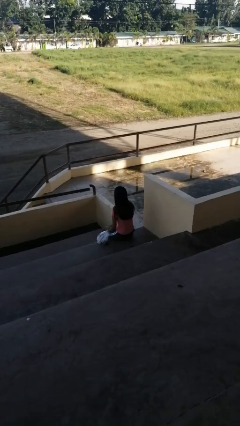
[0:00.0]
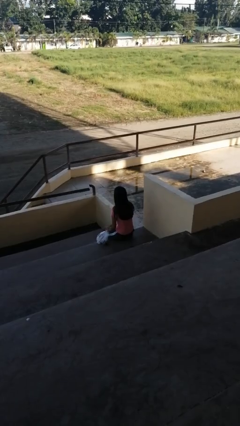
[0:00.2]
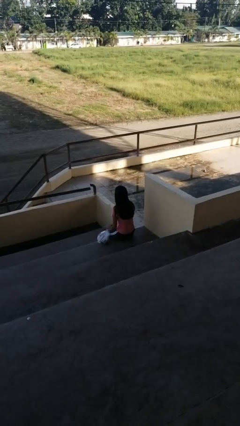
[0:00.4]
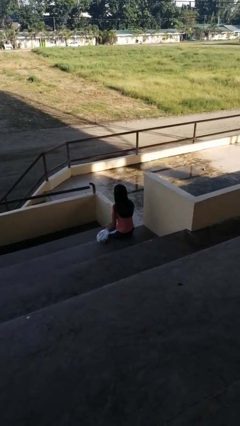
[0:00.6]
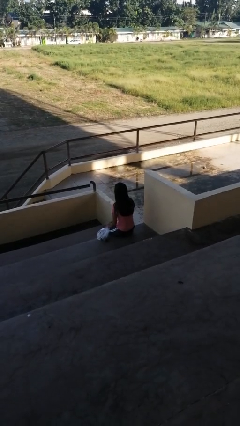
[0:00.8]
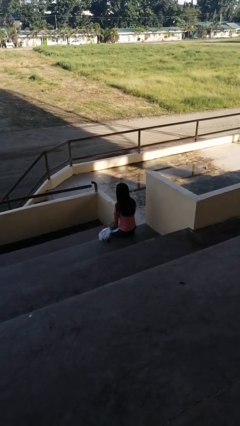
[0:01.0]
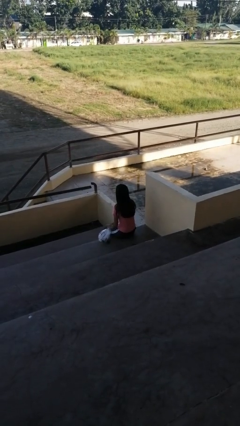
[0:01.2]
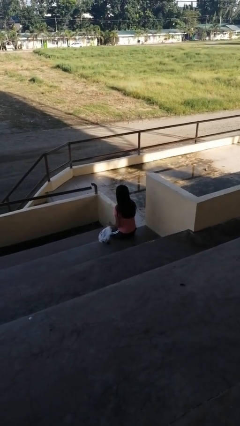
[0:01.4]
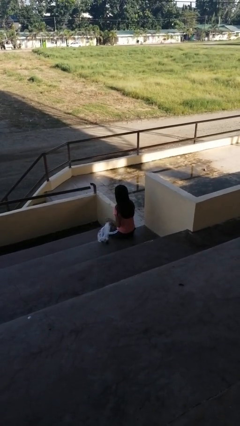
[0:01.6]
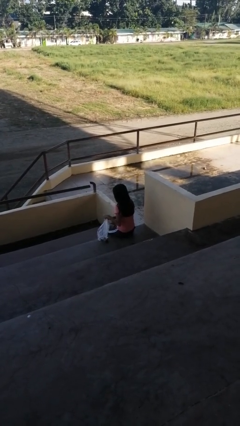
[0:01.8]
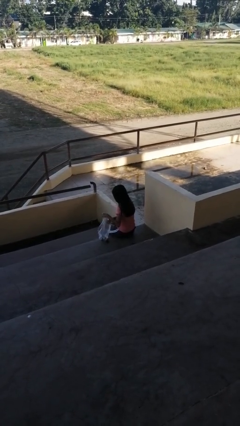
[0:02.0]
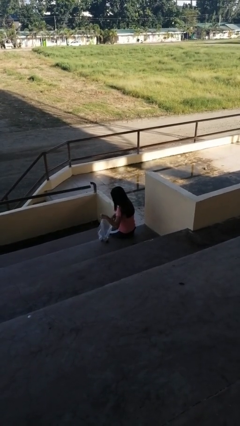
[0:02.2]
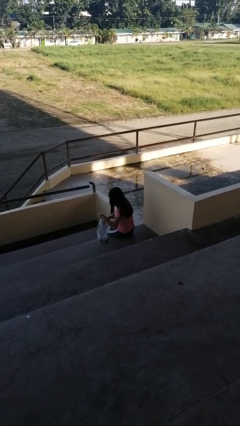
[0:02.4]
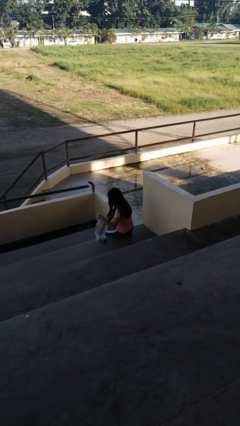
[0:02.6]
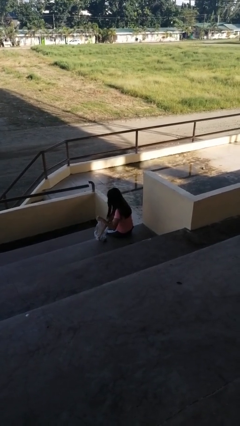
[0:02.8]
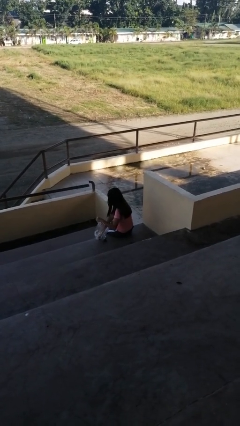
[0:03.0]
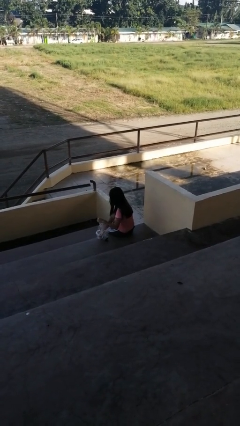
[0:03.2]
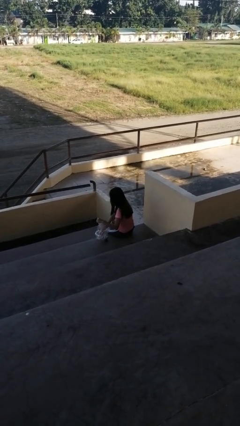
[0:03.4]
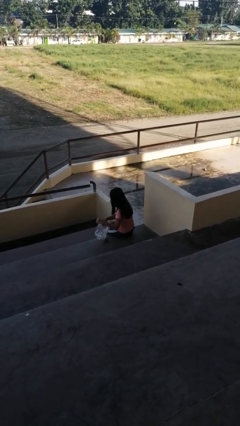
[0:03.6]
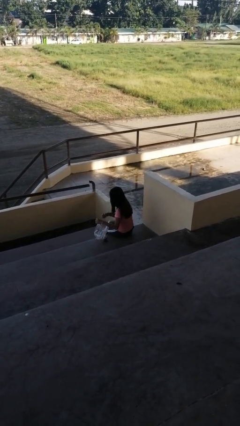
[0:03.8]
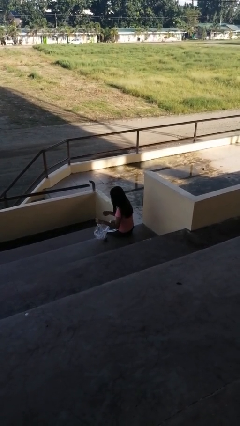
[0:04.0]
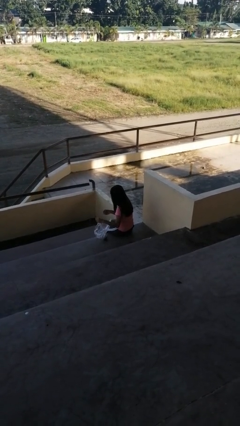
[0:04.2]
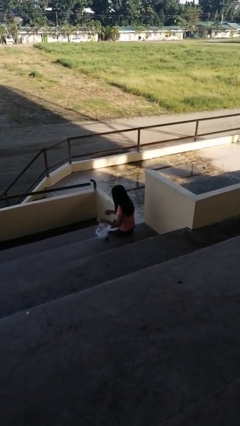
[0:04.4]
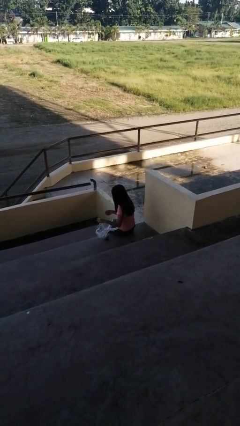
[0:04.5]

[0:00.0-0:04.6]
person takes object from bag

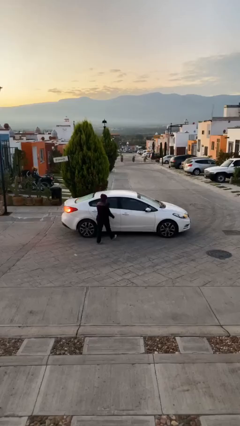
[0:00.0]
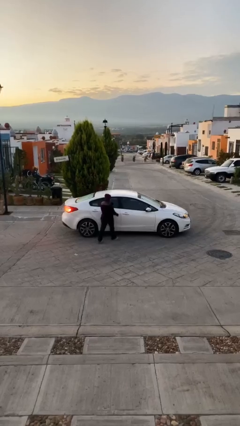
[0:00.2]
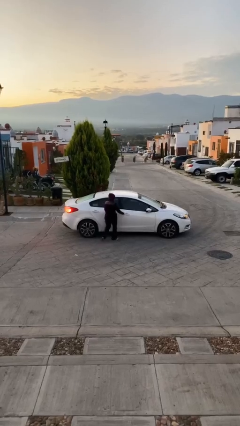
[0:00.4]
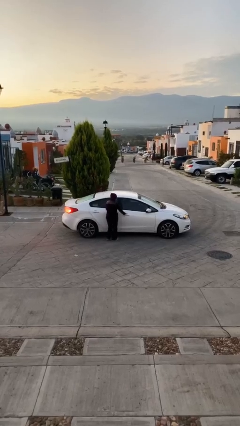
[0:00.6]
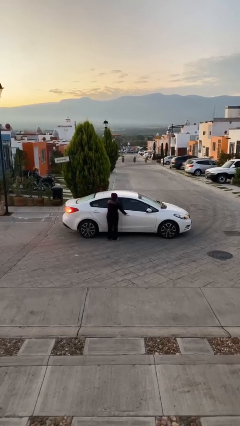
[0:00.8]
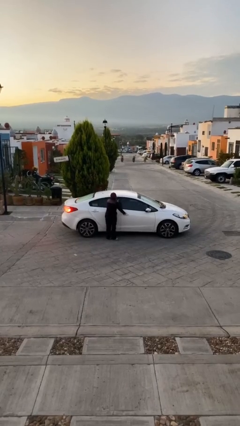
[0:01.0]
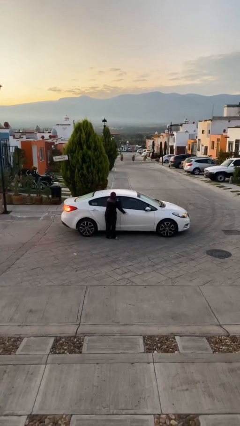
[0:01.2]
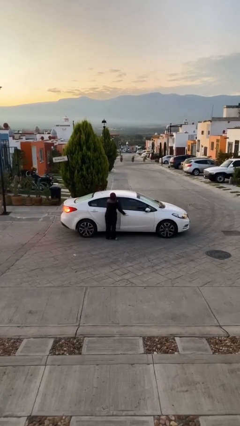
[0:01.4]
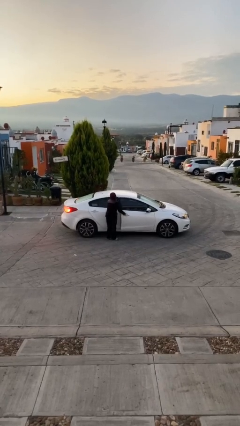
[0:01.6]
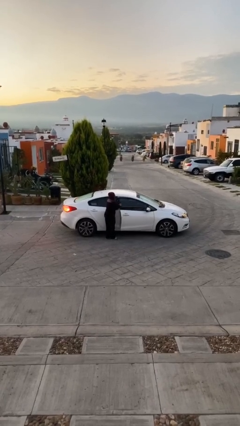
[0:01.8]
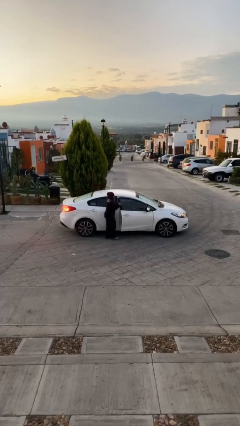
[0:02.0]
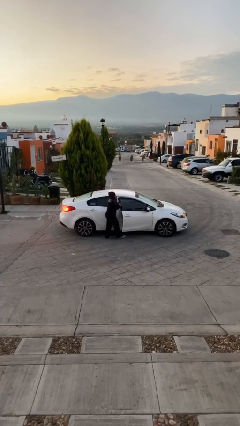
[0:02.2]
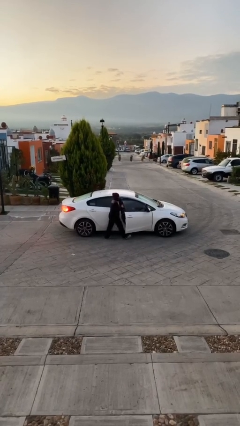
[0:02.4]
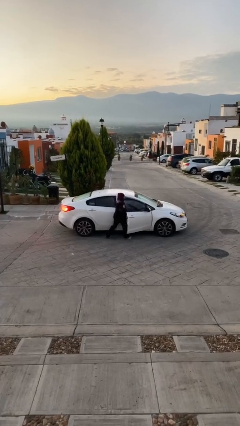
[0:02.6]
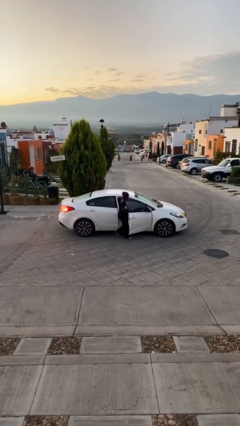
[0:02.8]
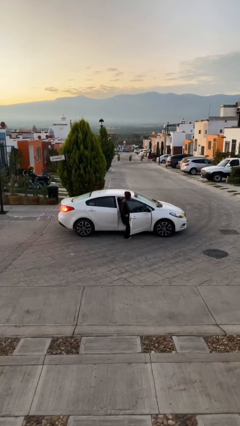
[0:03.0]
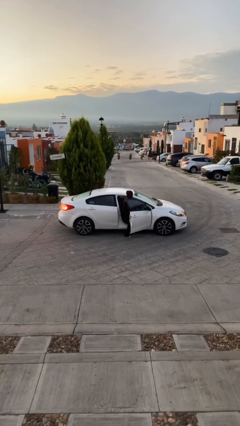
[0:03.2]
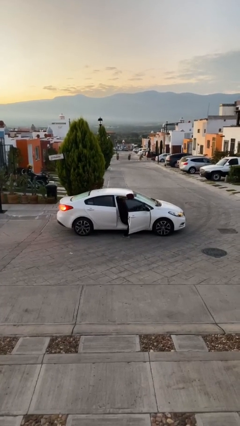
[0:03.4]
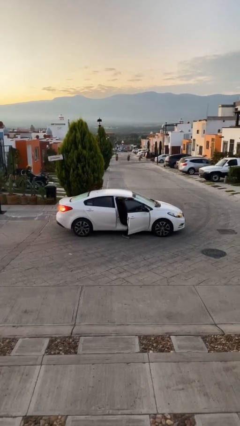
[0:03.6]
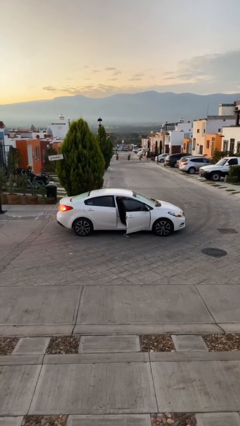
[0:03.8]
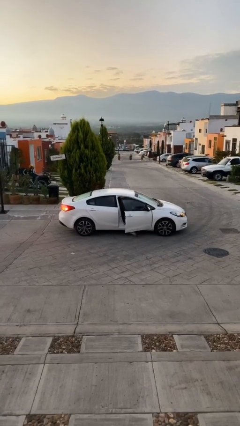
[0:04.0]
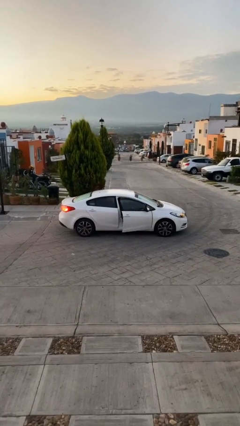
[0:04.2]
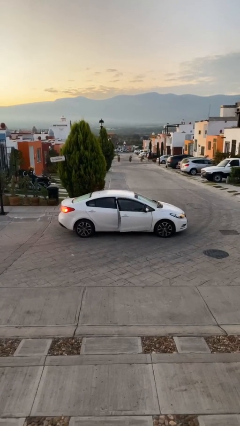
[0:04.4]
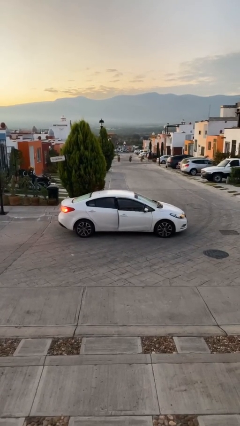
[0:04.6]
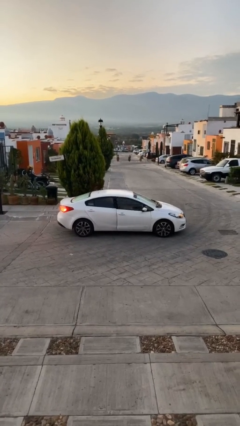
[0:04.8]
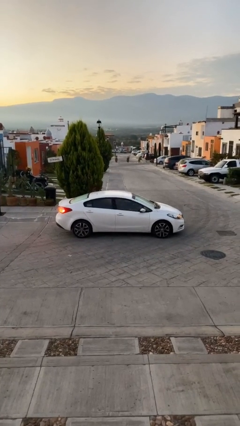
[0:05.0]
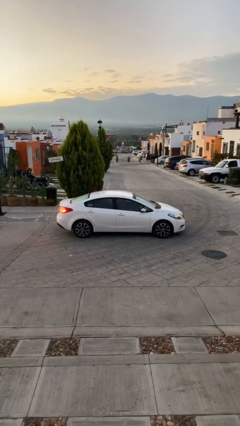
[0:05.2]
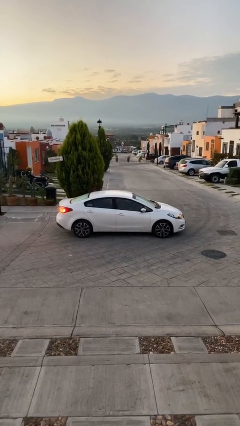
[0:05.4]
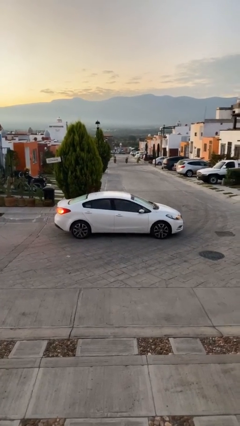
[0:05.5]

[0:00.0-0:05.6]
car picks up person

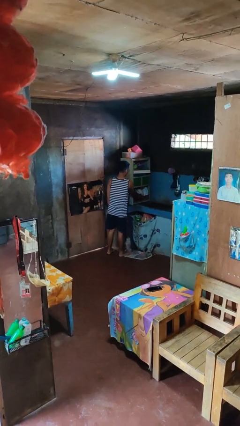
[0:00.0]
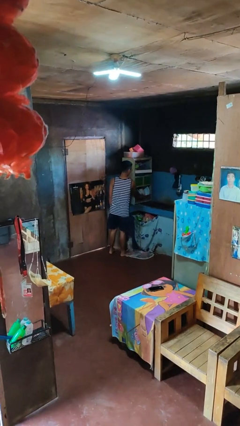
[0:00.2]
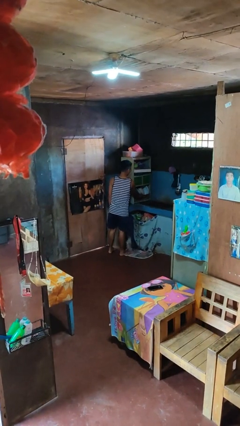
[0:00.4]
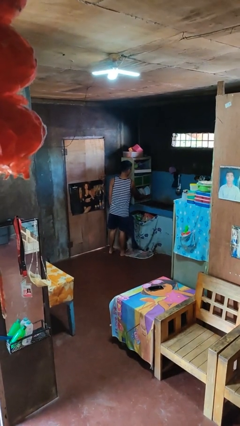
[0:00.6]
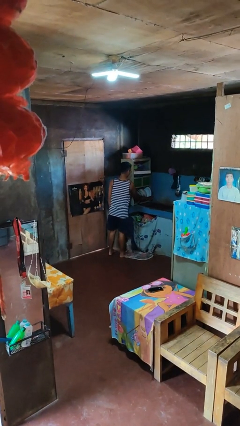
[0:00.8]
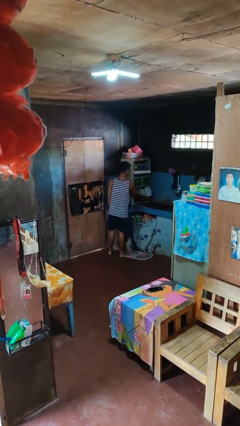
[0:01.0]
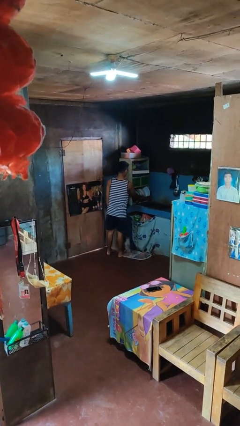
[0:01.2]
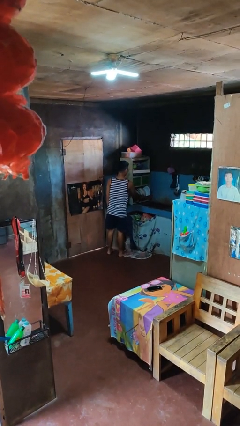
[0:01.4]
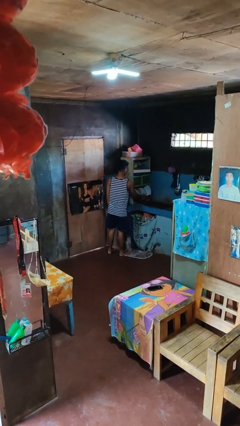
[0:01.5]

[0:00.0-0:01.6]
person opens dishwasher

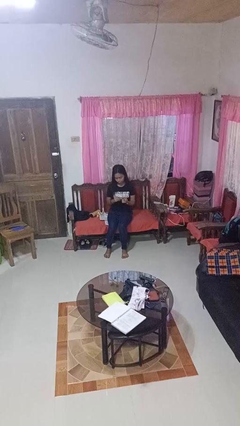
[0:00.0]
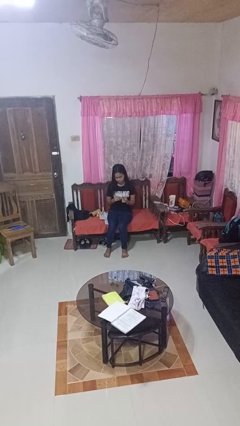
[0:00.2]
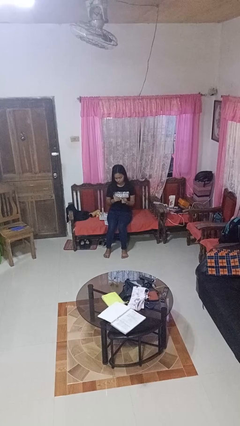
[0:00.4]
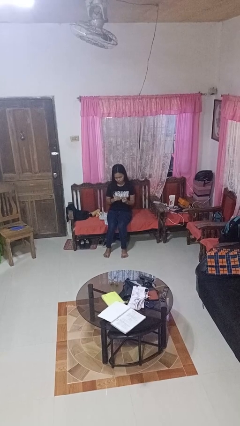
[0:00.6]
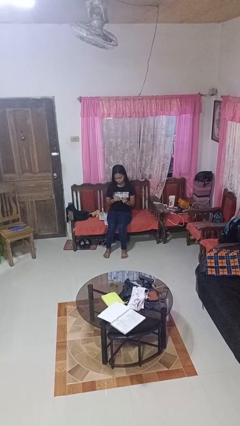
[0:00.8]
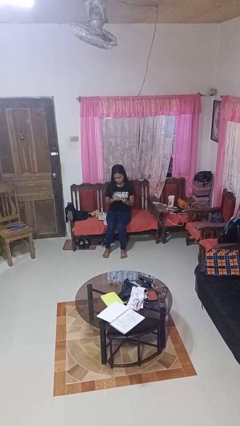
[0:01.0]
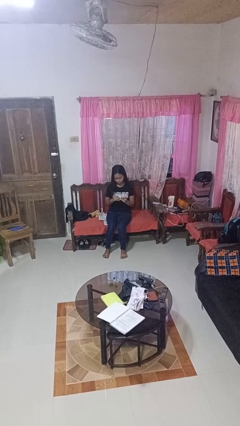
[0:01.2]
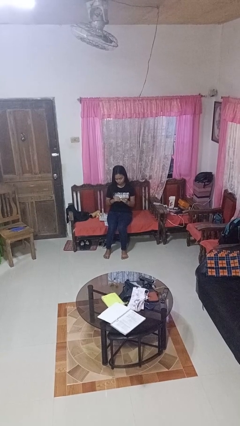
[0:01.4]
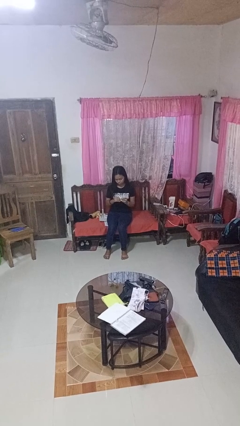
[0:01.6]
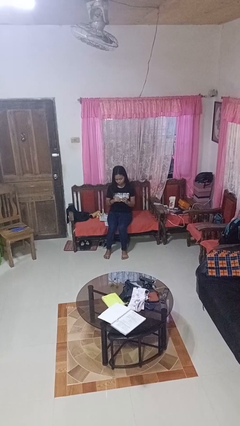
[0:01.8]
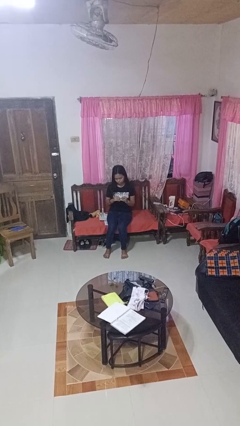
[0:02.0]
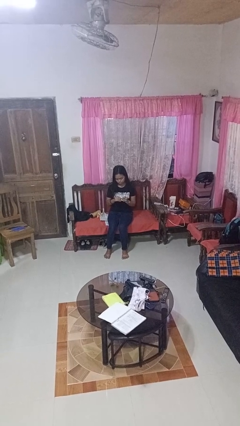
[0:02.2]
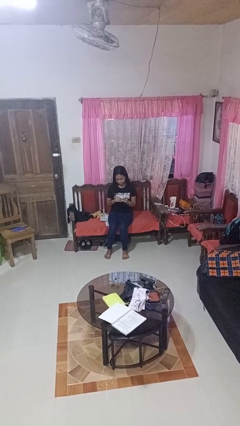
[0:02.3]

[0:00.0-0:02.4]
person clips fingernails

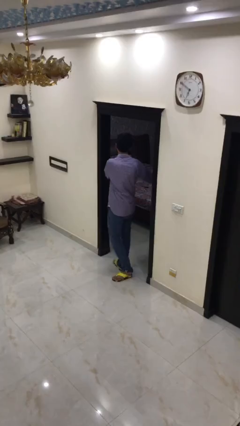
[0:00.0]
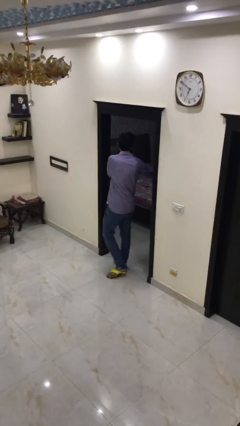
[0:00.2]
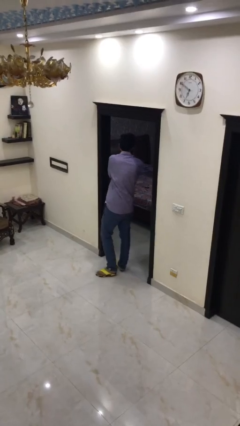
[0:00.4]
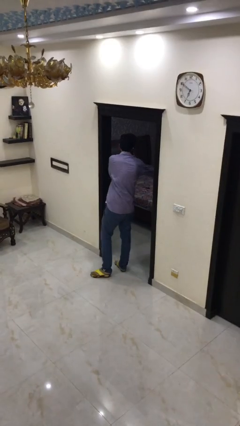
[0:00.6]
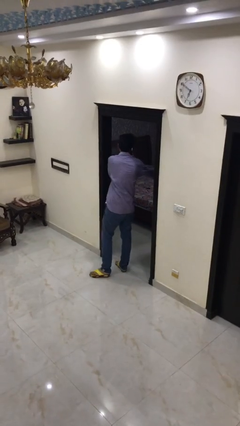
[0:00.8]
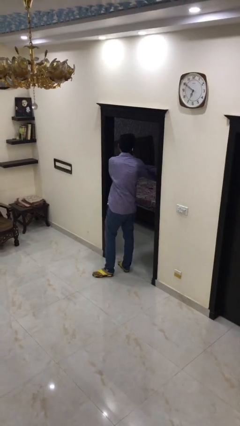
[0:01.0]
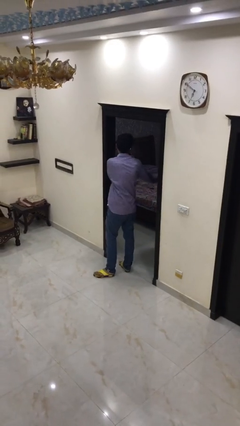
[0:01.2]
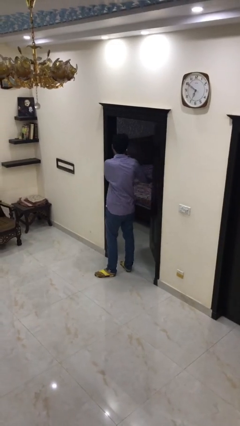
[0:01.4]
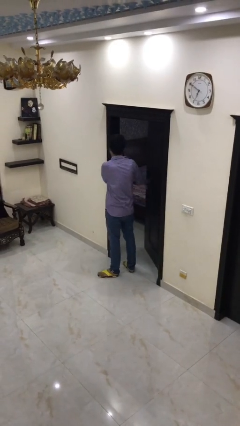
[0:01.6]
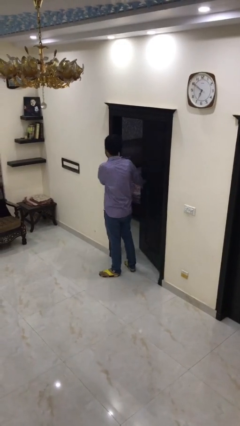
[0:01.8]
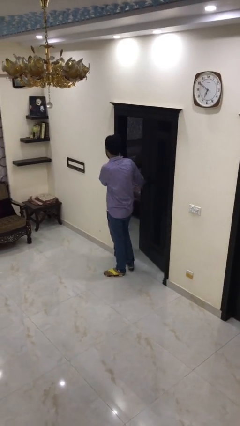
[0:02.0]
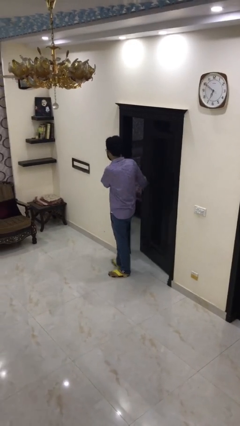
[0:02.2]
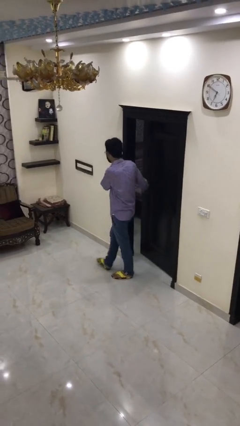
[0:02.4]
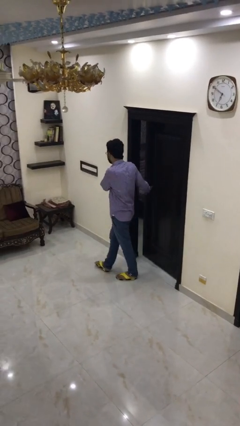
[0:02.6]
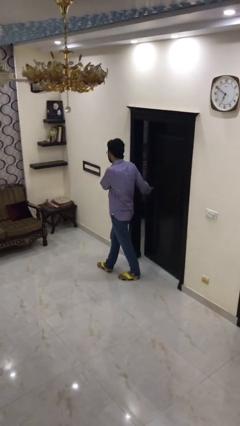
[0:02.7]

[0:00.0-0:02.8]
person closes facility door

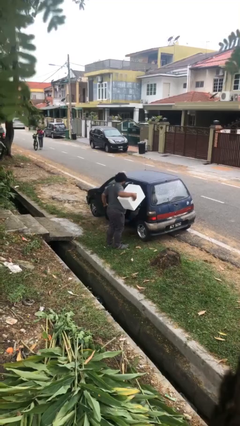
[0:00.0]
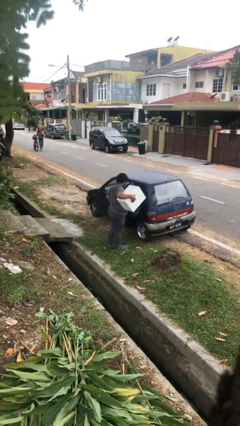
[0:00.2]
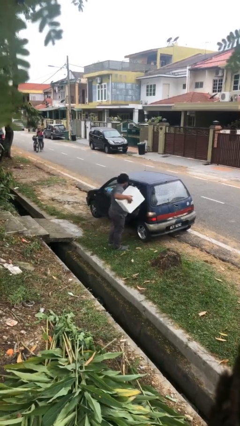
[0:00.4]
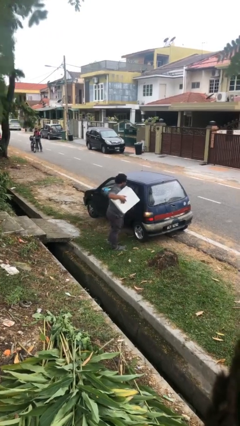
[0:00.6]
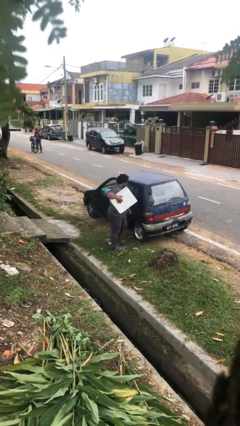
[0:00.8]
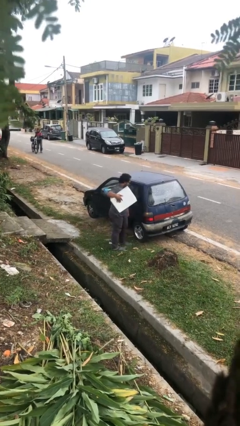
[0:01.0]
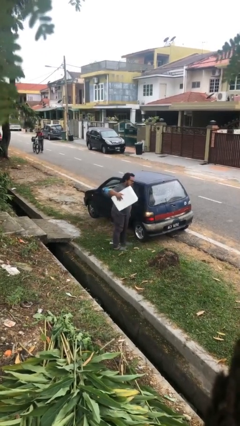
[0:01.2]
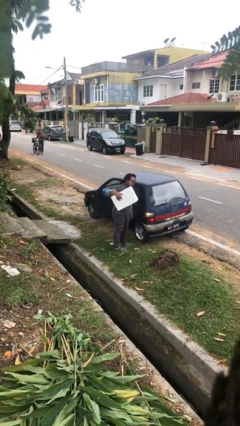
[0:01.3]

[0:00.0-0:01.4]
person closes car door
